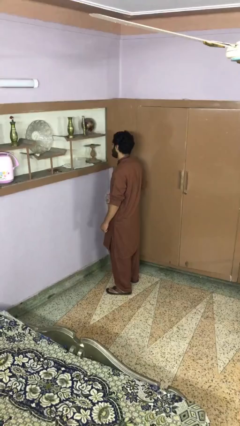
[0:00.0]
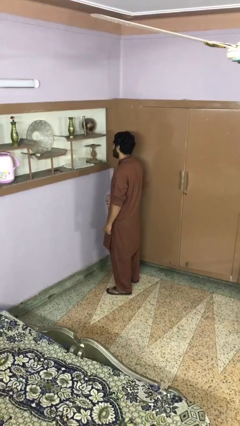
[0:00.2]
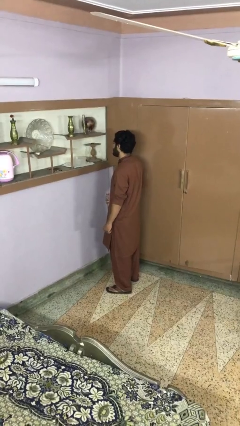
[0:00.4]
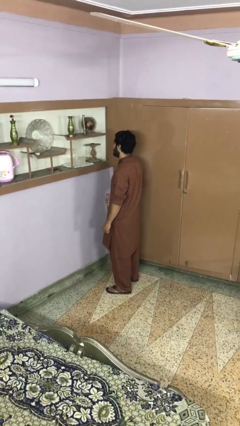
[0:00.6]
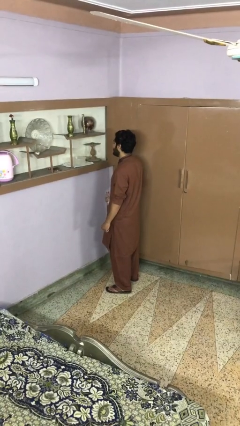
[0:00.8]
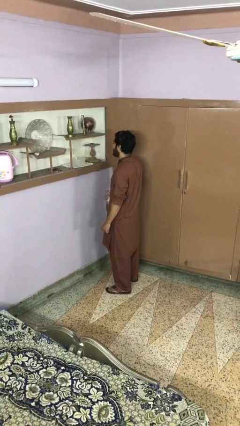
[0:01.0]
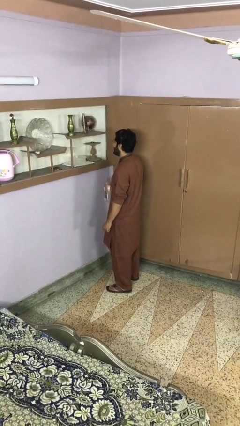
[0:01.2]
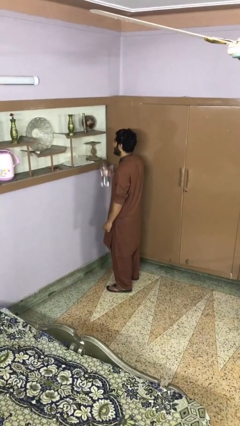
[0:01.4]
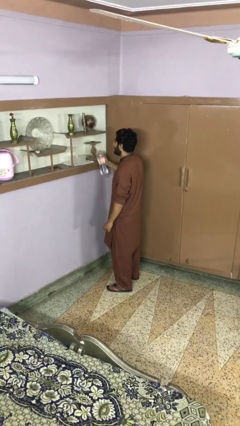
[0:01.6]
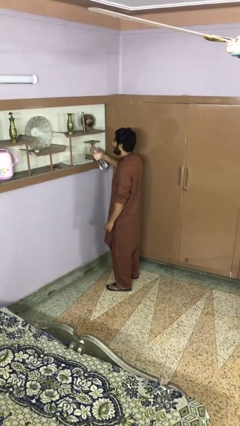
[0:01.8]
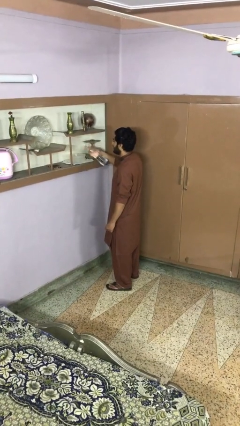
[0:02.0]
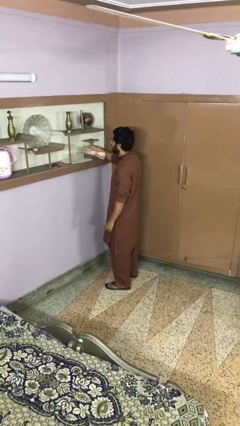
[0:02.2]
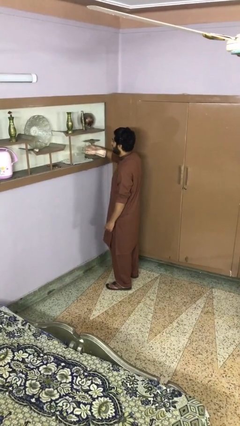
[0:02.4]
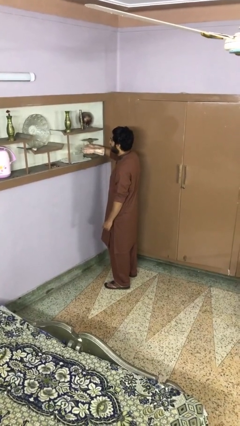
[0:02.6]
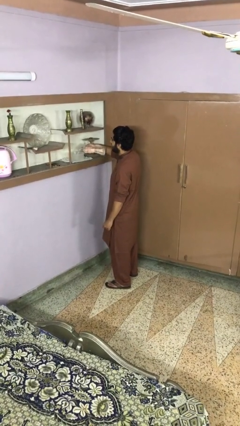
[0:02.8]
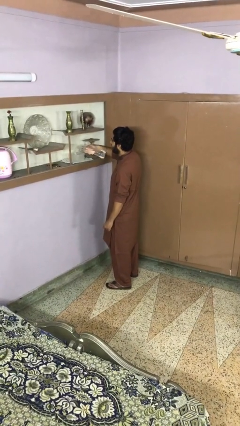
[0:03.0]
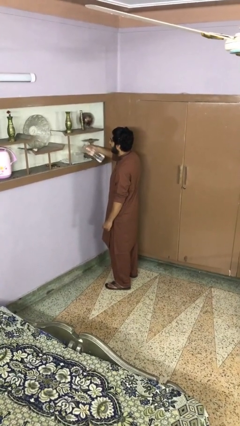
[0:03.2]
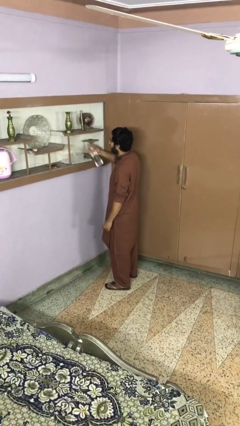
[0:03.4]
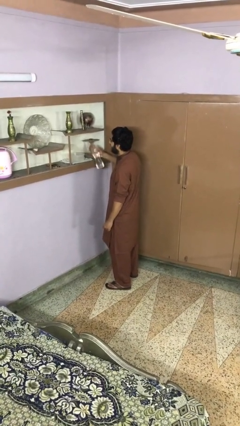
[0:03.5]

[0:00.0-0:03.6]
person pours into bowl

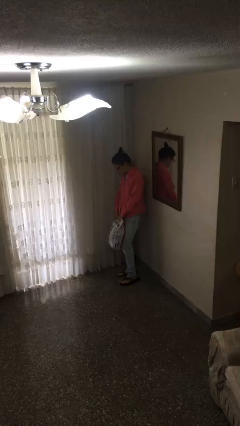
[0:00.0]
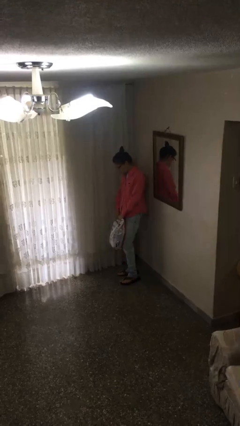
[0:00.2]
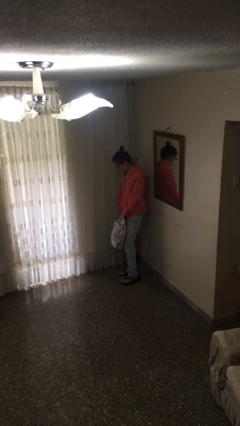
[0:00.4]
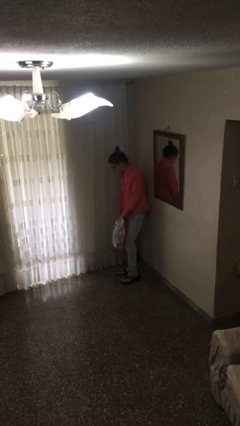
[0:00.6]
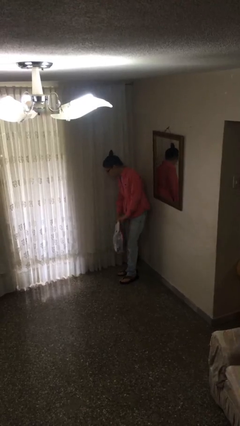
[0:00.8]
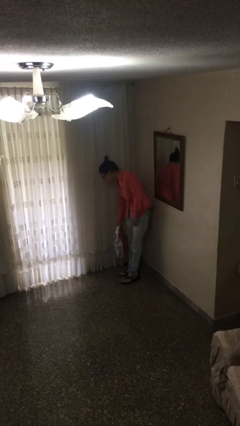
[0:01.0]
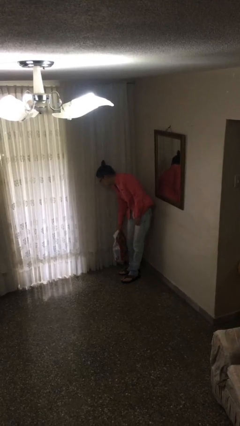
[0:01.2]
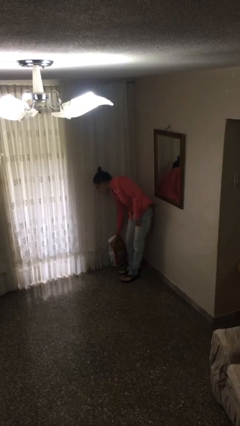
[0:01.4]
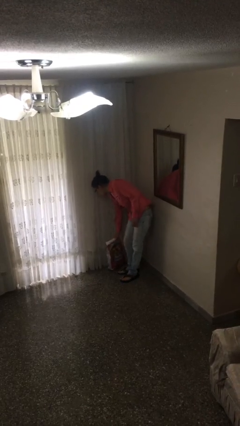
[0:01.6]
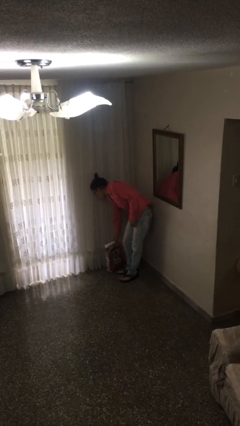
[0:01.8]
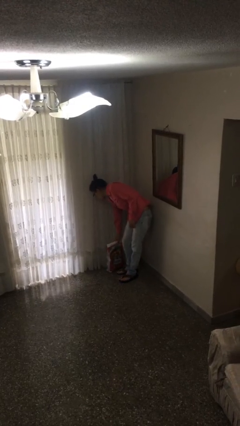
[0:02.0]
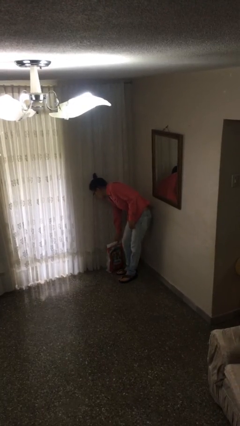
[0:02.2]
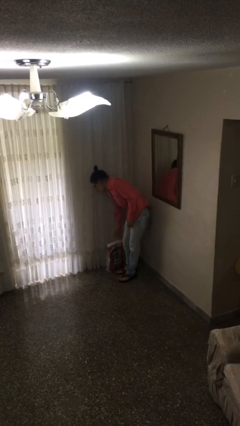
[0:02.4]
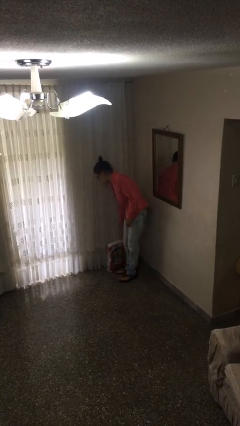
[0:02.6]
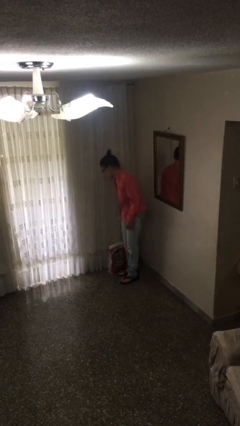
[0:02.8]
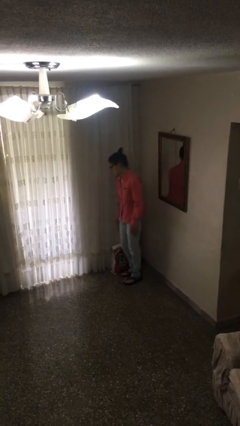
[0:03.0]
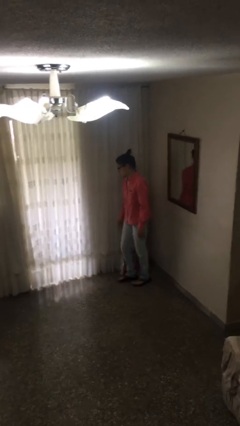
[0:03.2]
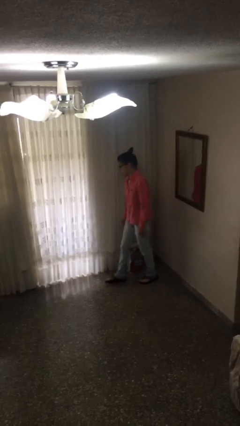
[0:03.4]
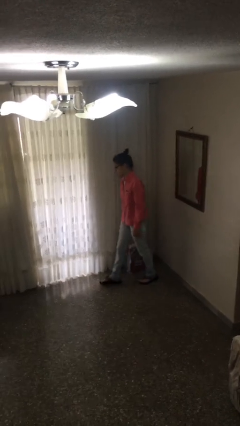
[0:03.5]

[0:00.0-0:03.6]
person puts down object on floor

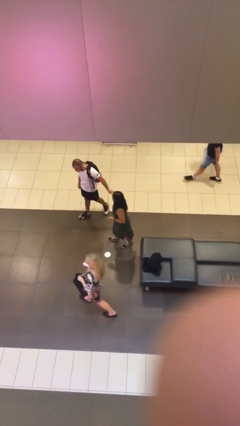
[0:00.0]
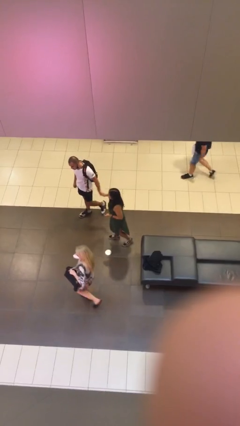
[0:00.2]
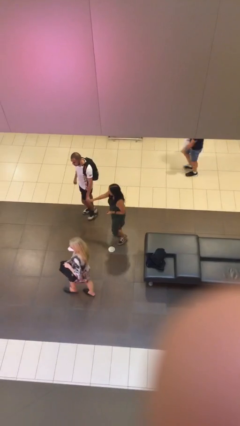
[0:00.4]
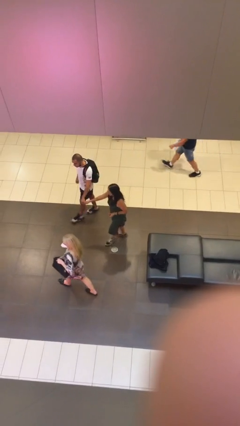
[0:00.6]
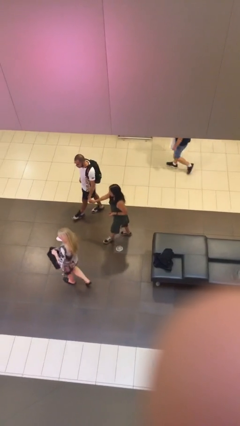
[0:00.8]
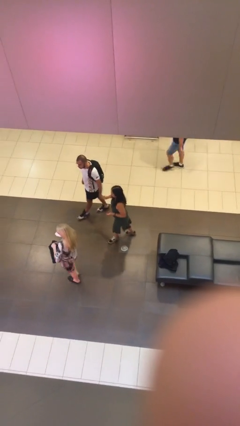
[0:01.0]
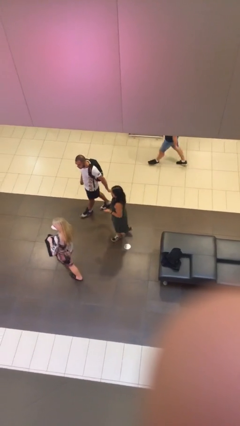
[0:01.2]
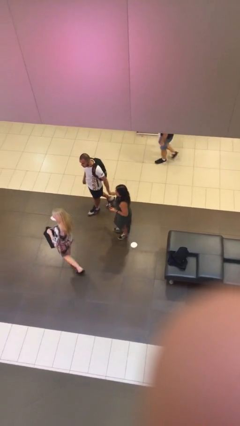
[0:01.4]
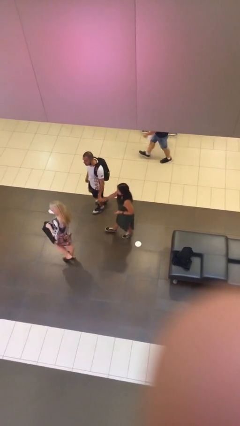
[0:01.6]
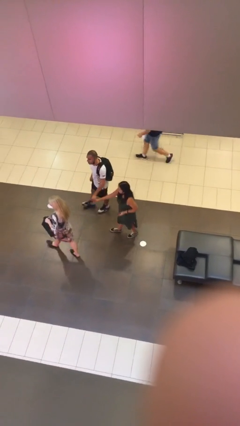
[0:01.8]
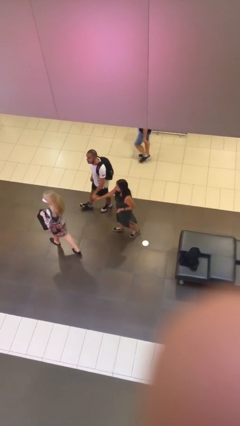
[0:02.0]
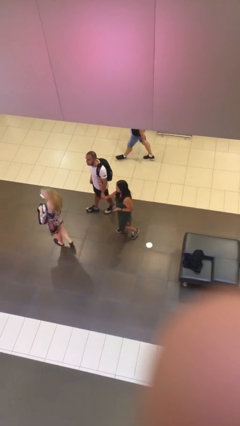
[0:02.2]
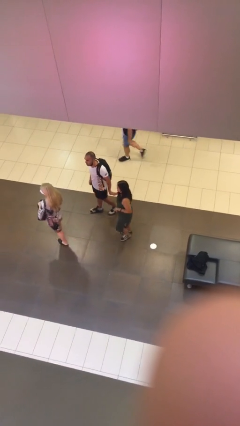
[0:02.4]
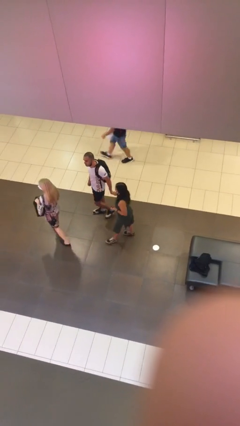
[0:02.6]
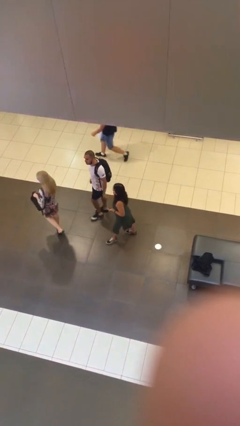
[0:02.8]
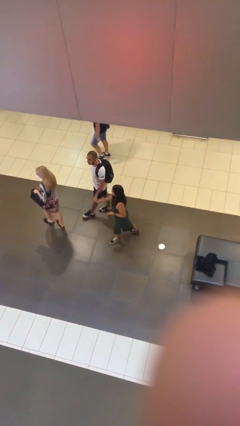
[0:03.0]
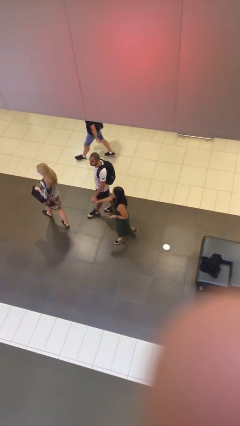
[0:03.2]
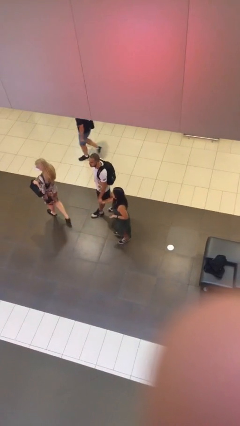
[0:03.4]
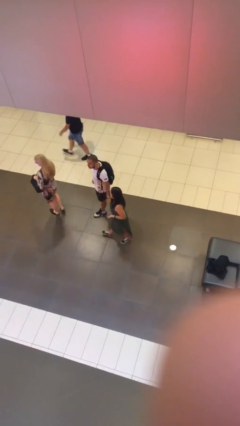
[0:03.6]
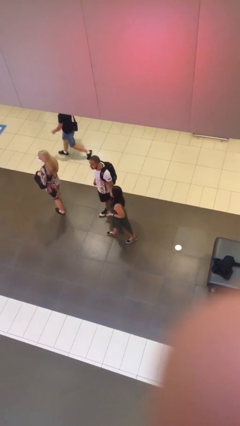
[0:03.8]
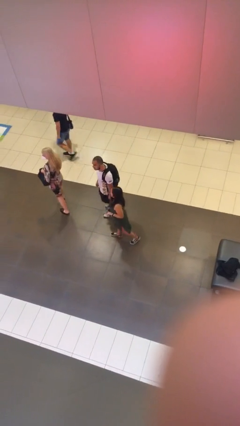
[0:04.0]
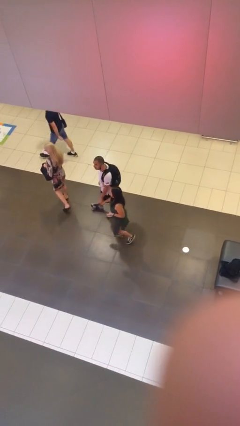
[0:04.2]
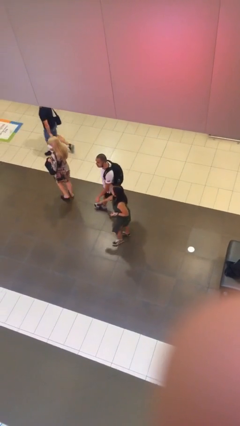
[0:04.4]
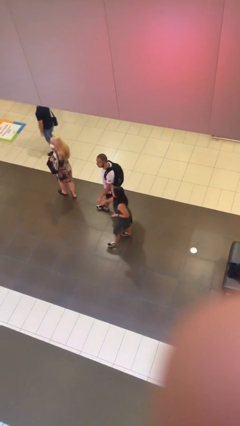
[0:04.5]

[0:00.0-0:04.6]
person holds hand

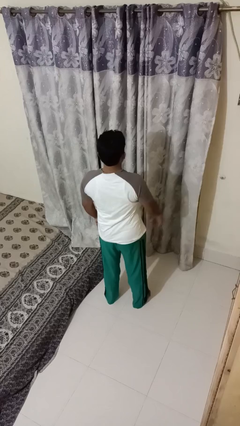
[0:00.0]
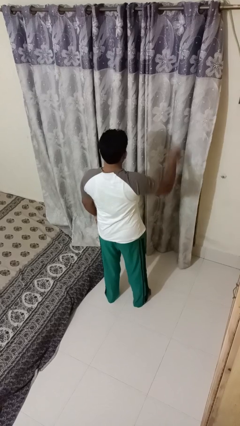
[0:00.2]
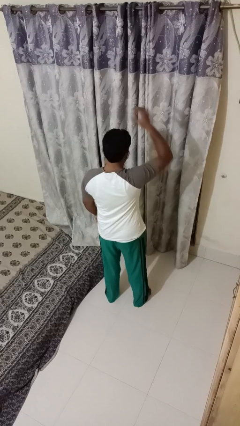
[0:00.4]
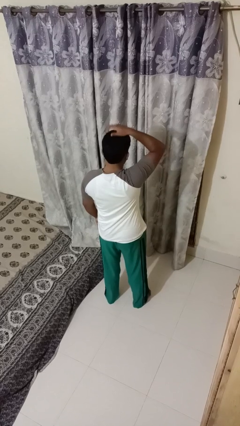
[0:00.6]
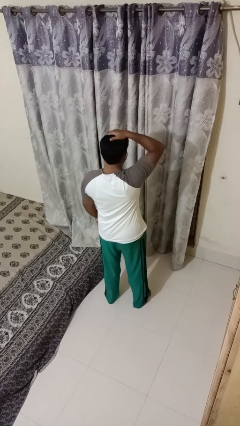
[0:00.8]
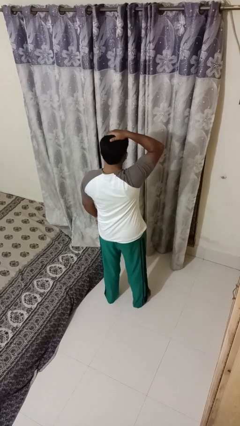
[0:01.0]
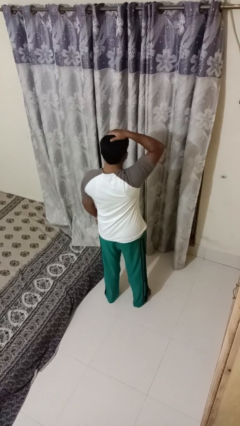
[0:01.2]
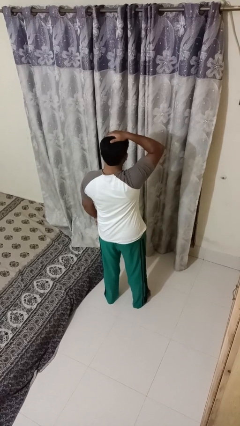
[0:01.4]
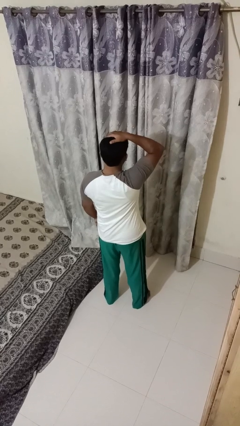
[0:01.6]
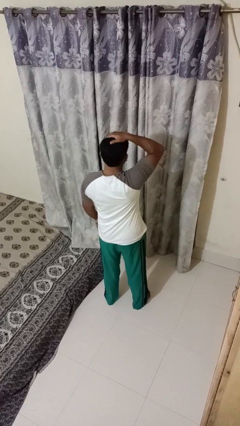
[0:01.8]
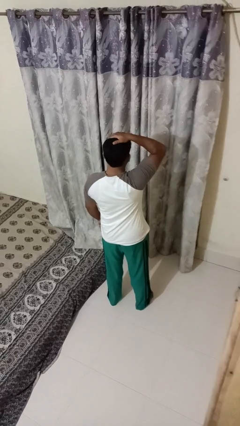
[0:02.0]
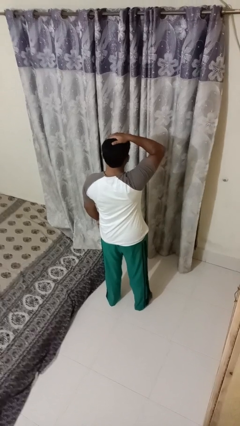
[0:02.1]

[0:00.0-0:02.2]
person pats head

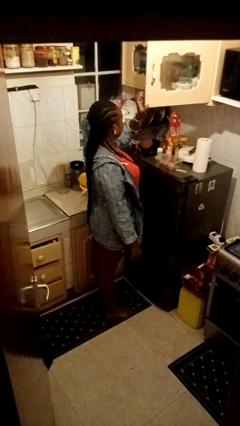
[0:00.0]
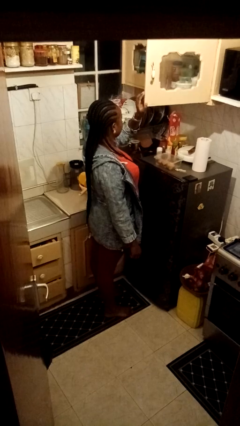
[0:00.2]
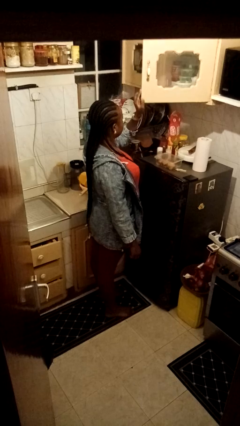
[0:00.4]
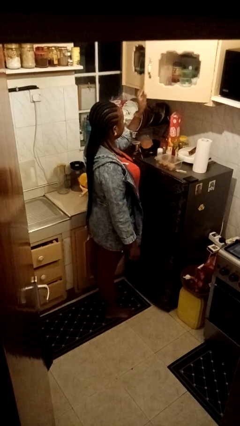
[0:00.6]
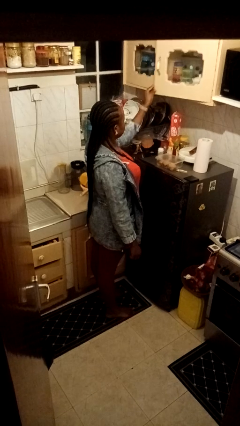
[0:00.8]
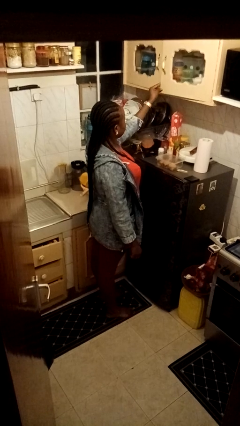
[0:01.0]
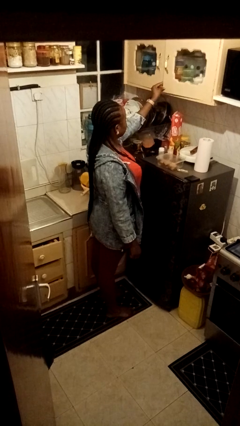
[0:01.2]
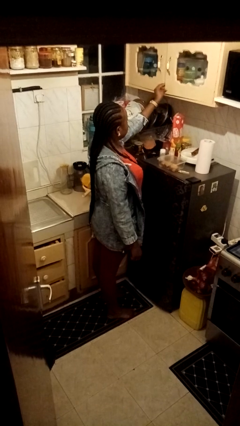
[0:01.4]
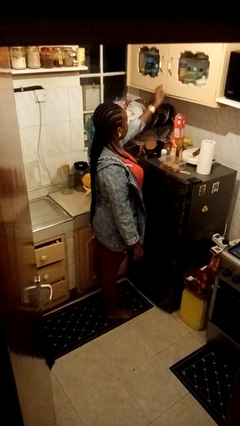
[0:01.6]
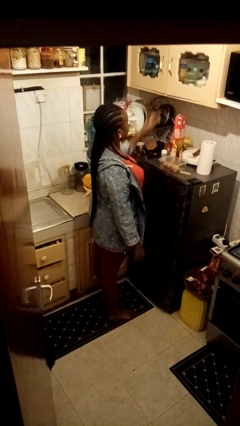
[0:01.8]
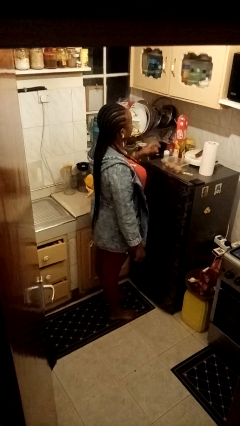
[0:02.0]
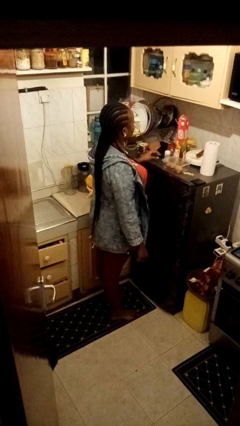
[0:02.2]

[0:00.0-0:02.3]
person closes cabinet

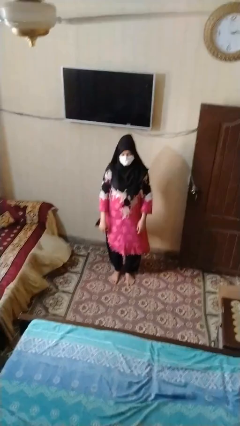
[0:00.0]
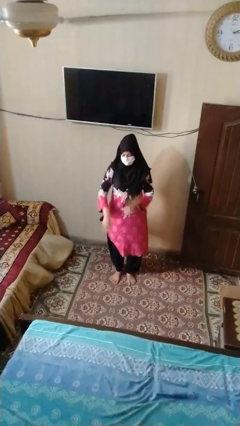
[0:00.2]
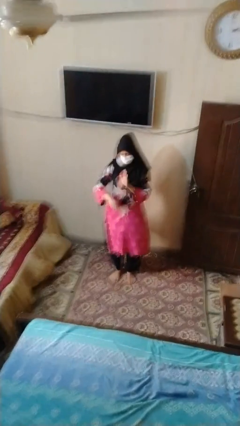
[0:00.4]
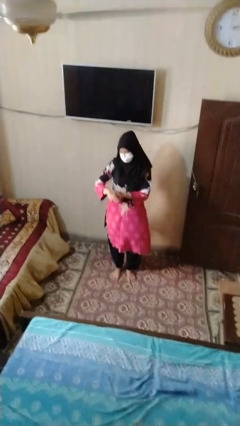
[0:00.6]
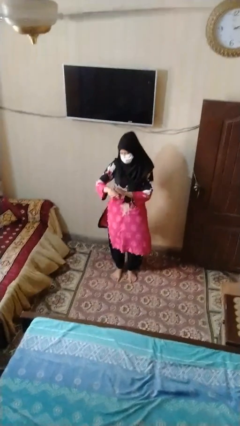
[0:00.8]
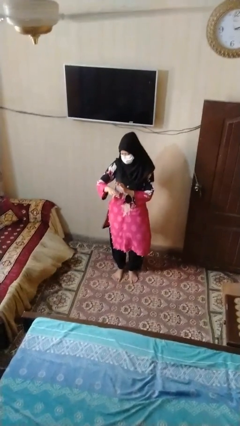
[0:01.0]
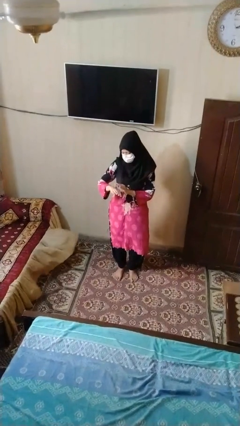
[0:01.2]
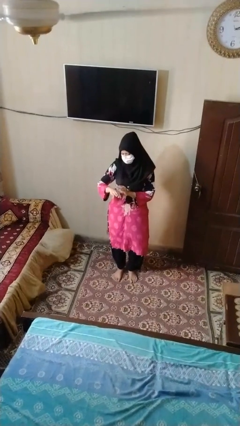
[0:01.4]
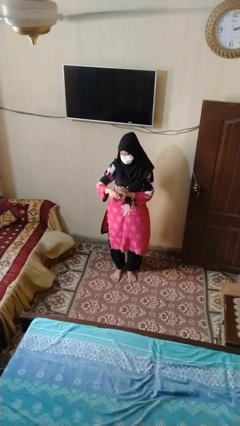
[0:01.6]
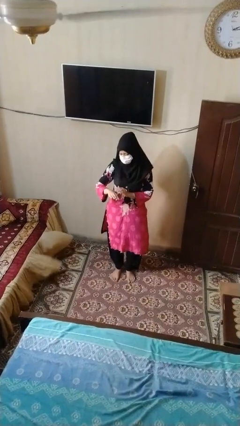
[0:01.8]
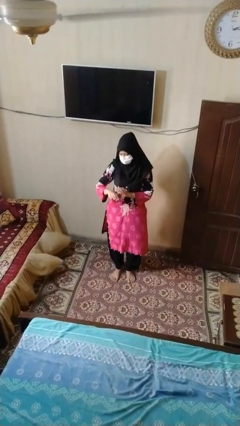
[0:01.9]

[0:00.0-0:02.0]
person closes jewelry box
